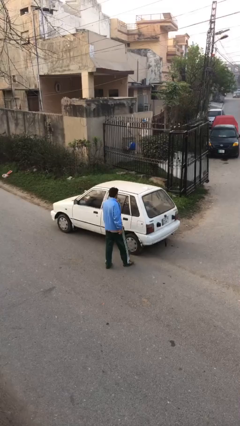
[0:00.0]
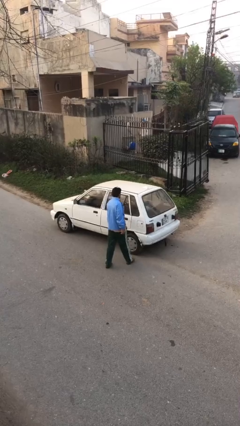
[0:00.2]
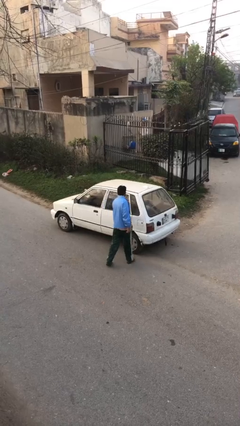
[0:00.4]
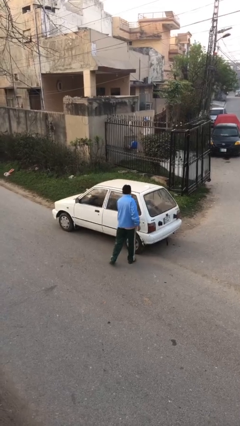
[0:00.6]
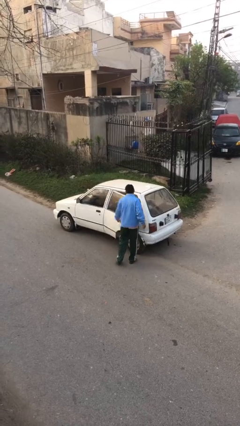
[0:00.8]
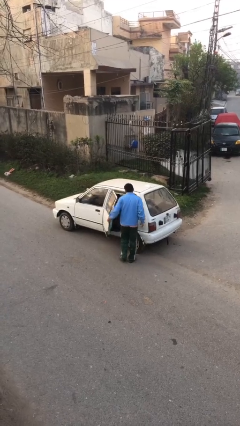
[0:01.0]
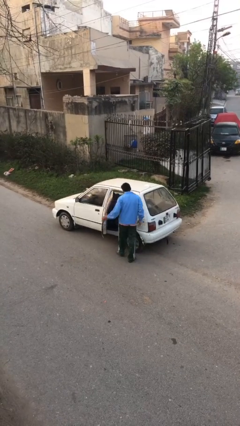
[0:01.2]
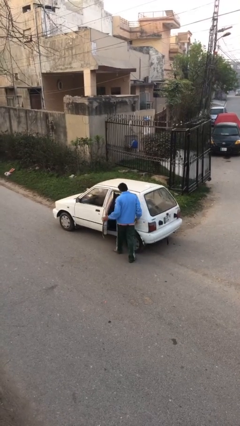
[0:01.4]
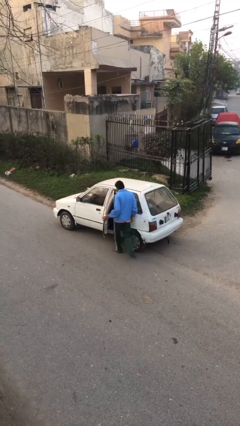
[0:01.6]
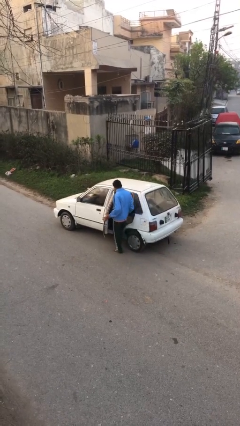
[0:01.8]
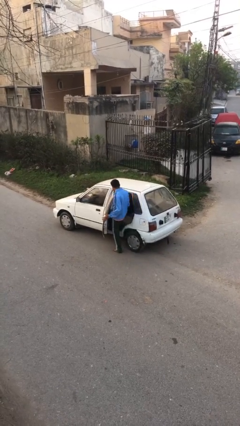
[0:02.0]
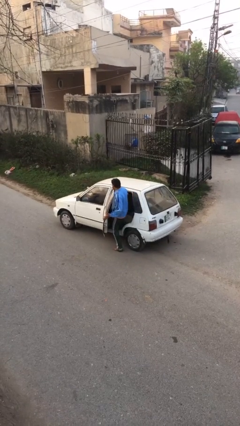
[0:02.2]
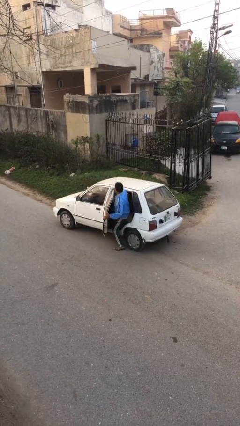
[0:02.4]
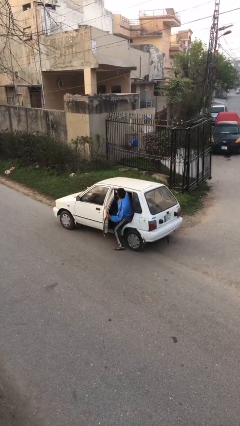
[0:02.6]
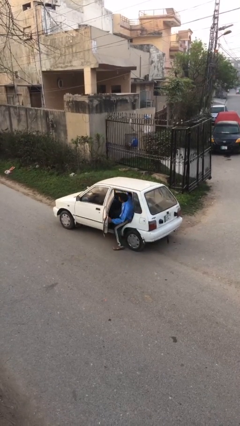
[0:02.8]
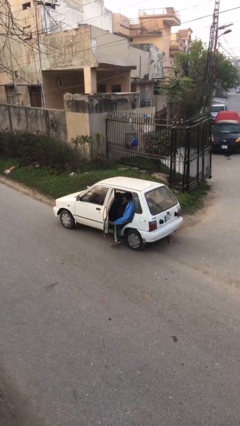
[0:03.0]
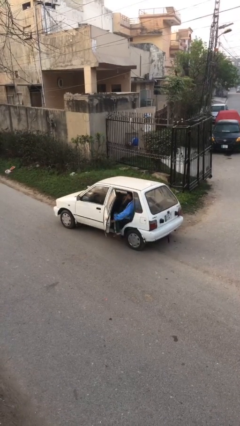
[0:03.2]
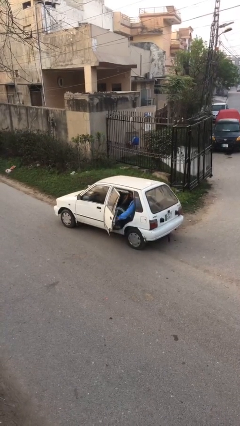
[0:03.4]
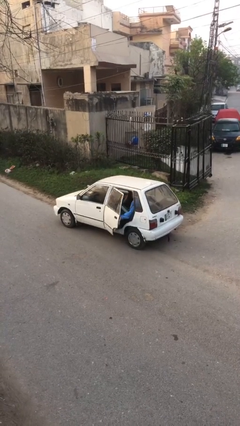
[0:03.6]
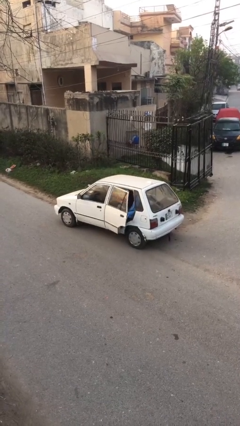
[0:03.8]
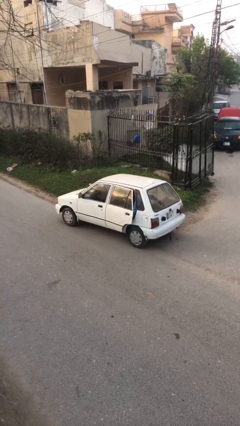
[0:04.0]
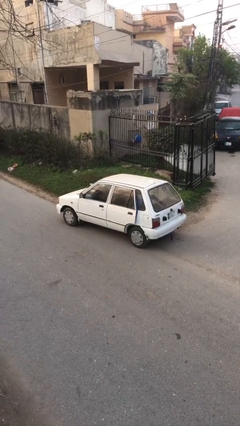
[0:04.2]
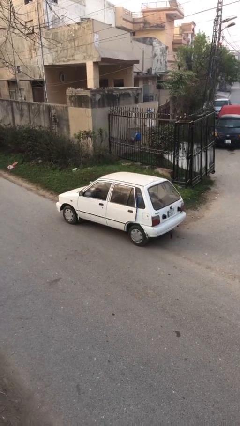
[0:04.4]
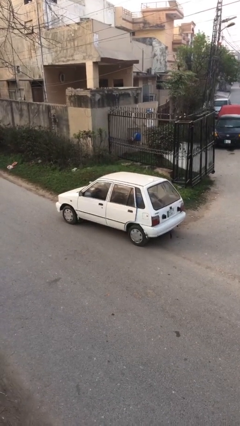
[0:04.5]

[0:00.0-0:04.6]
car picks up person

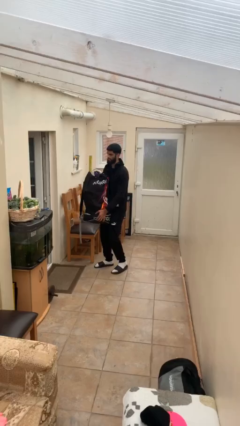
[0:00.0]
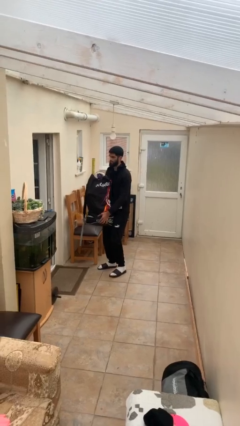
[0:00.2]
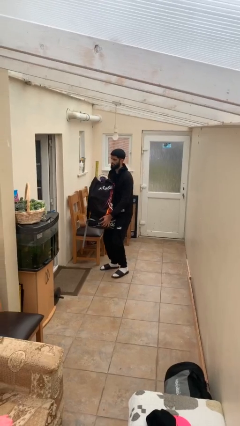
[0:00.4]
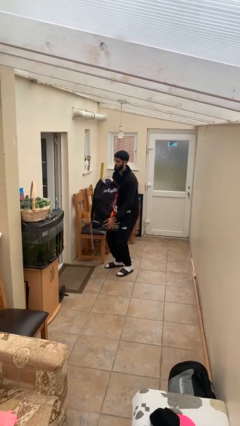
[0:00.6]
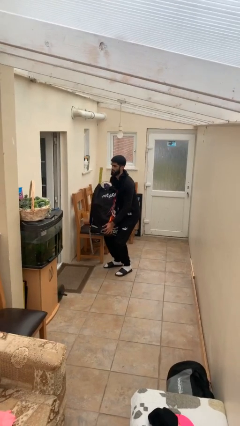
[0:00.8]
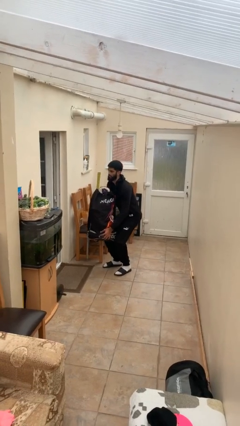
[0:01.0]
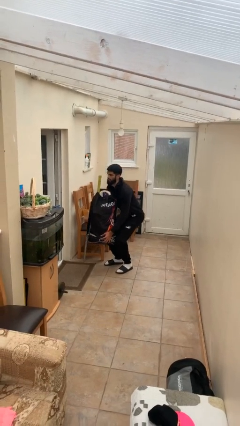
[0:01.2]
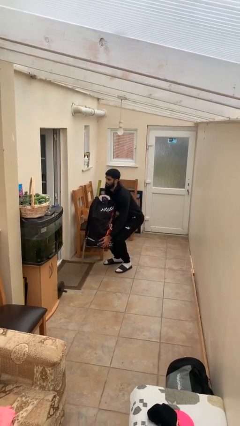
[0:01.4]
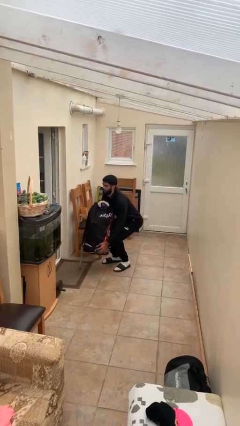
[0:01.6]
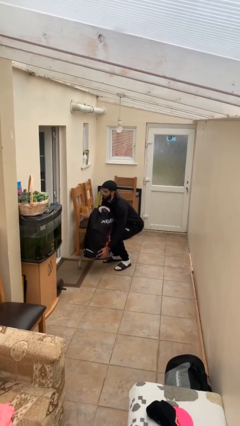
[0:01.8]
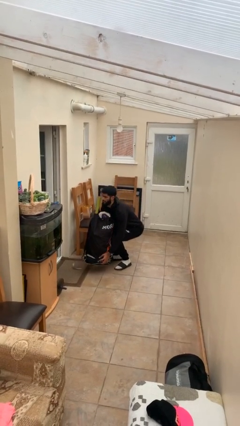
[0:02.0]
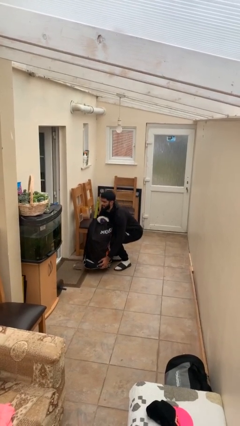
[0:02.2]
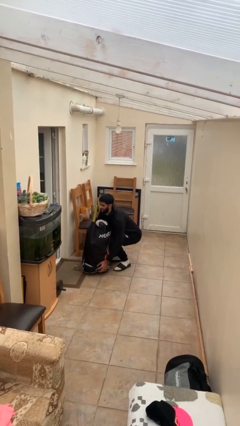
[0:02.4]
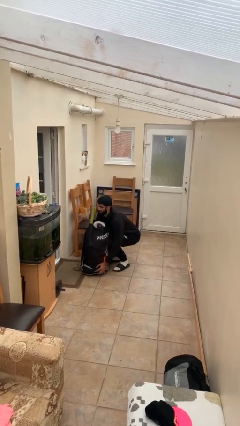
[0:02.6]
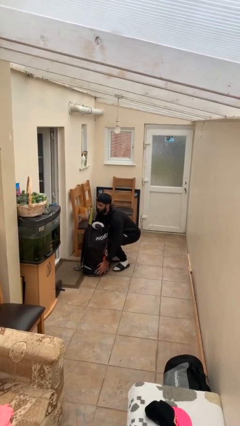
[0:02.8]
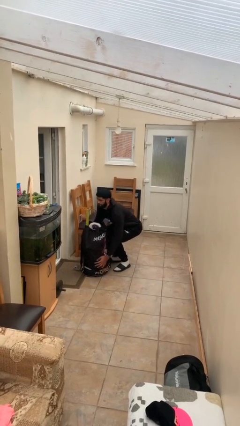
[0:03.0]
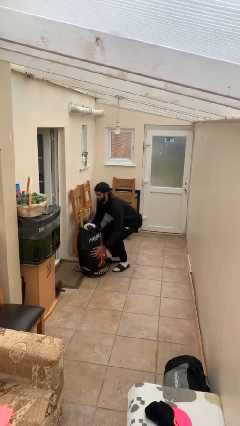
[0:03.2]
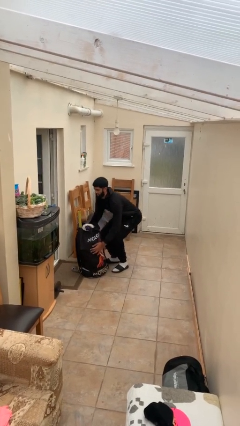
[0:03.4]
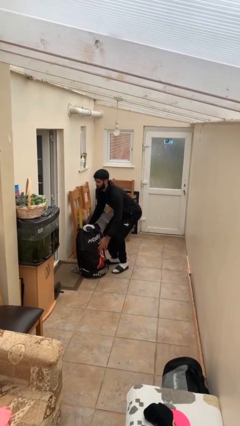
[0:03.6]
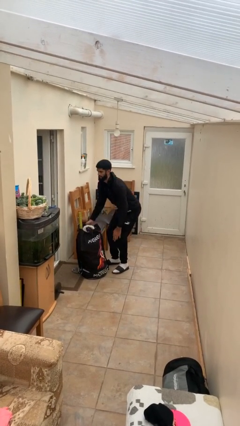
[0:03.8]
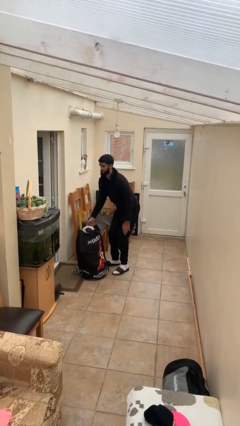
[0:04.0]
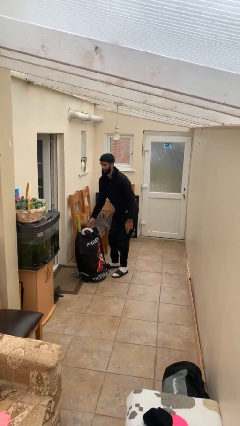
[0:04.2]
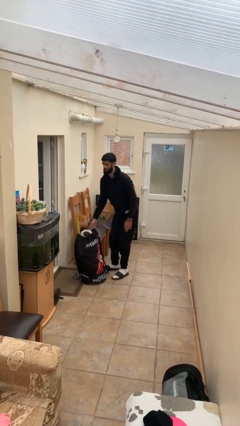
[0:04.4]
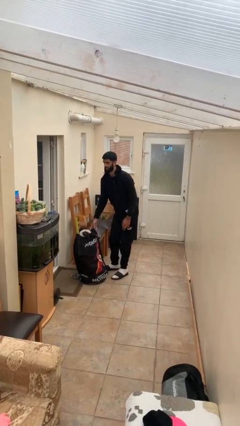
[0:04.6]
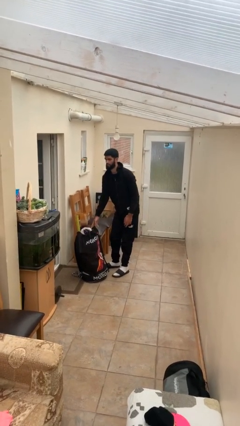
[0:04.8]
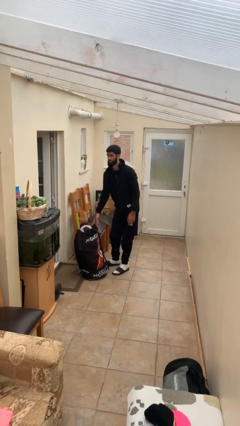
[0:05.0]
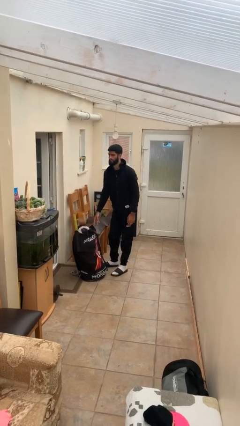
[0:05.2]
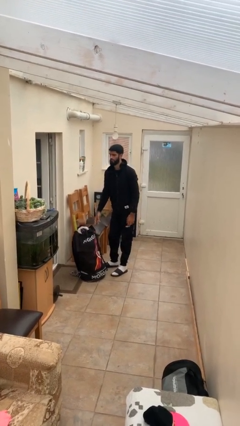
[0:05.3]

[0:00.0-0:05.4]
person puts down object on floor

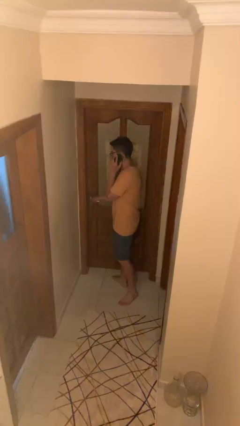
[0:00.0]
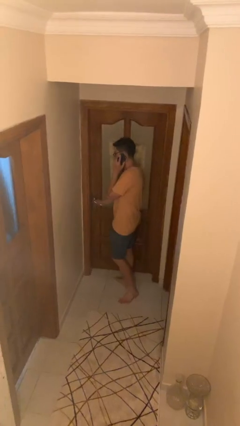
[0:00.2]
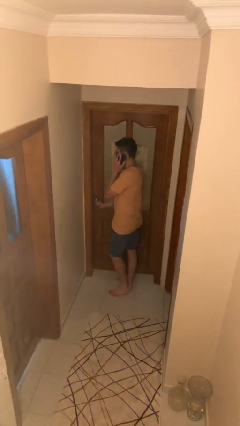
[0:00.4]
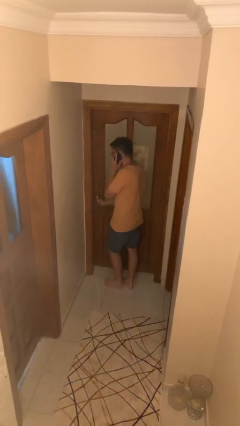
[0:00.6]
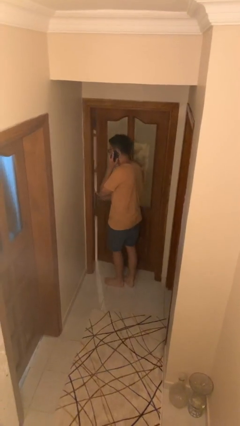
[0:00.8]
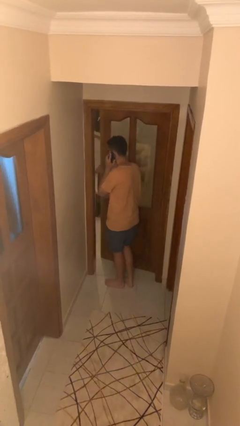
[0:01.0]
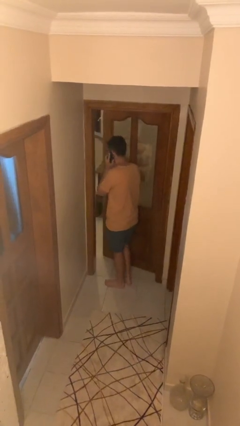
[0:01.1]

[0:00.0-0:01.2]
person opens facility door

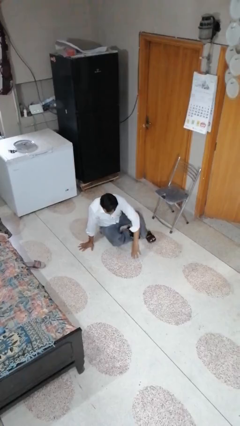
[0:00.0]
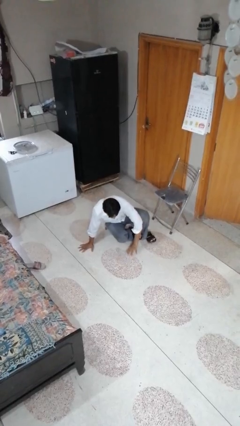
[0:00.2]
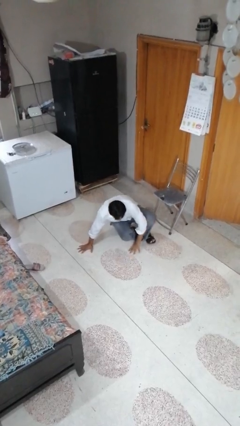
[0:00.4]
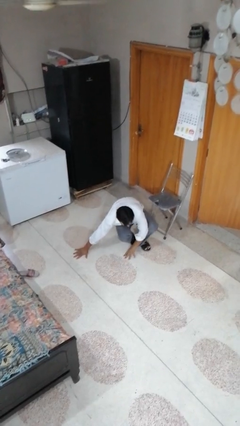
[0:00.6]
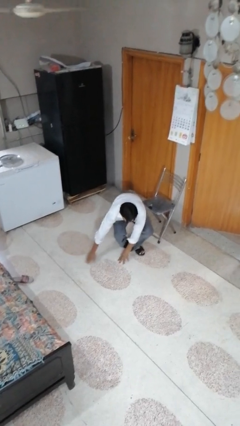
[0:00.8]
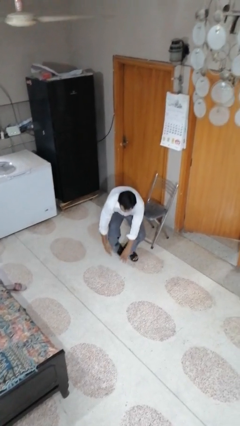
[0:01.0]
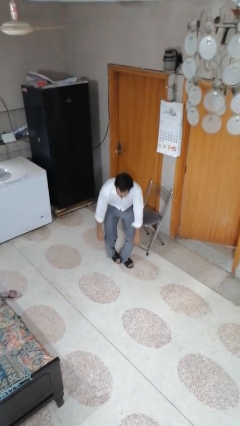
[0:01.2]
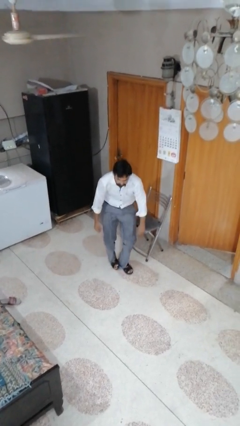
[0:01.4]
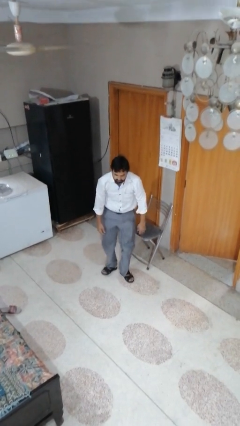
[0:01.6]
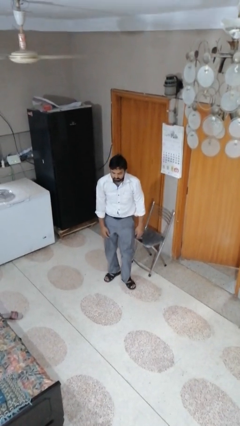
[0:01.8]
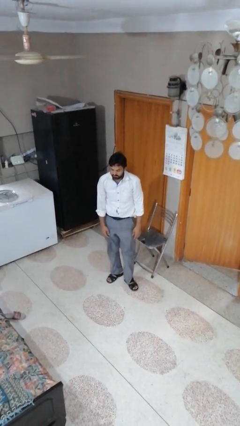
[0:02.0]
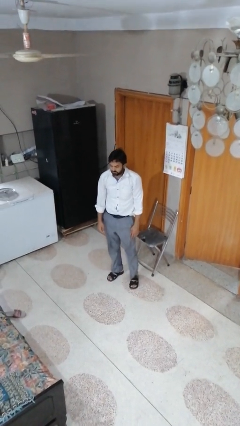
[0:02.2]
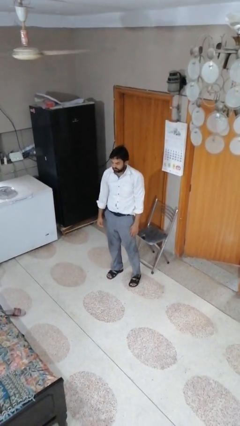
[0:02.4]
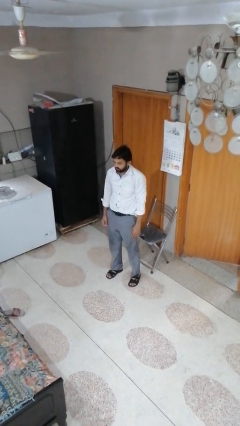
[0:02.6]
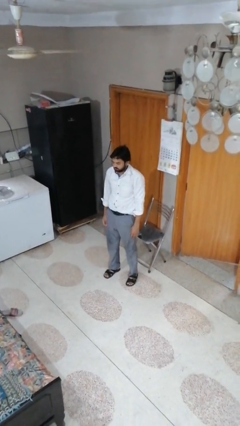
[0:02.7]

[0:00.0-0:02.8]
person stands up from floor

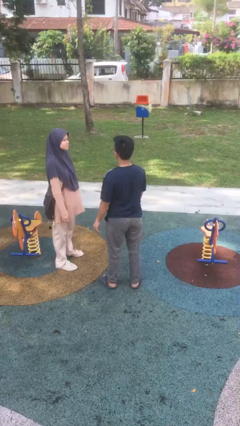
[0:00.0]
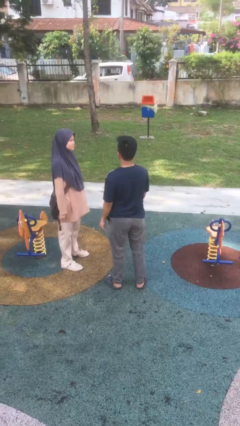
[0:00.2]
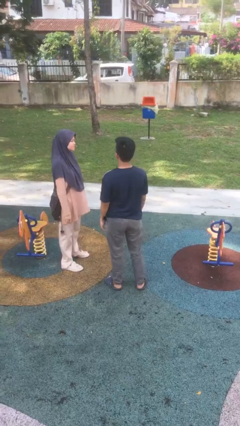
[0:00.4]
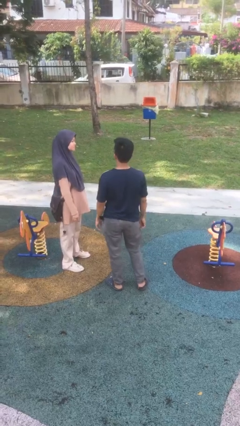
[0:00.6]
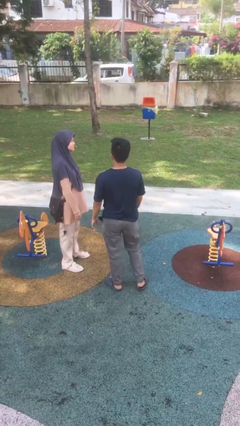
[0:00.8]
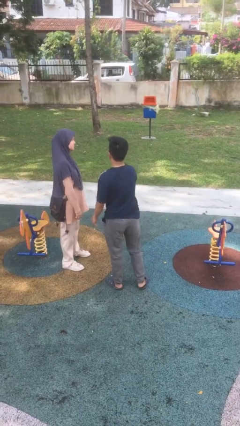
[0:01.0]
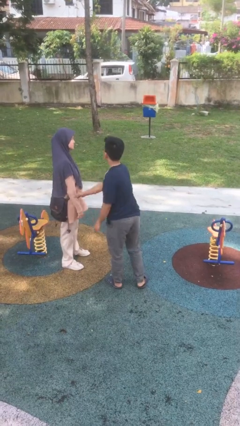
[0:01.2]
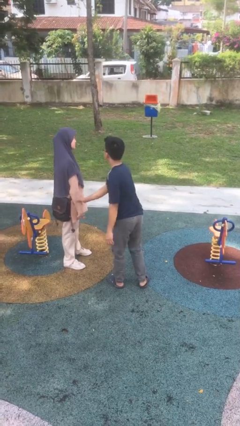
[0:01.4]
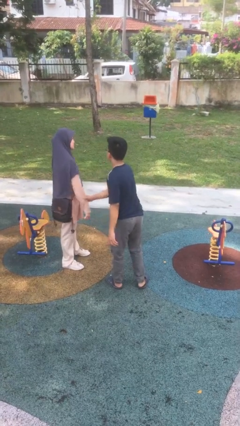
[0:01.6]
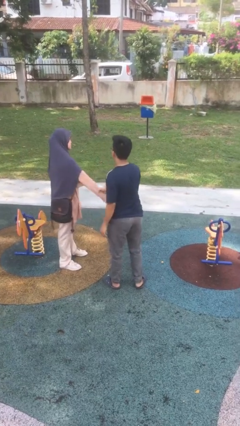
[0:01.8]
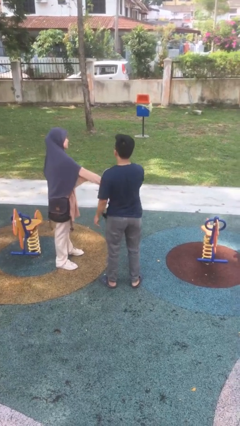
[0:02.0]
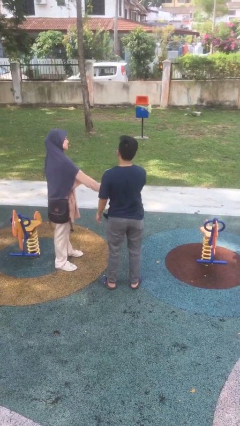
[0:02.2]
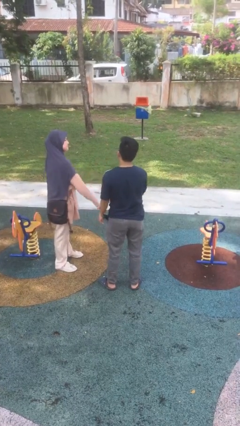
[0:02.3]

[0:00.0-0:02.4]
person grabs person by forearm

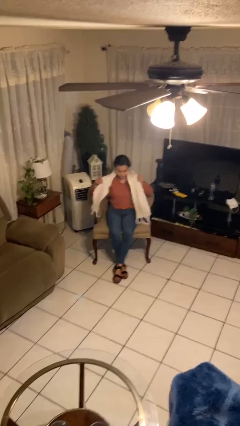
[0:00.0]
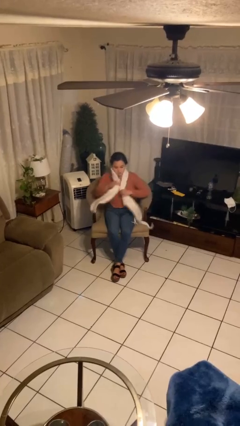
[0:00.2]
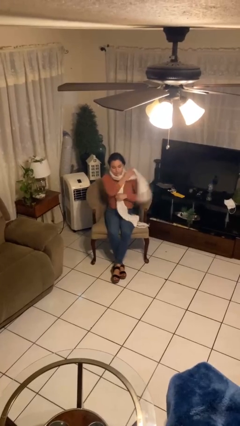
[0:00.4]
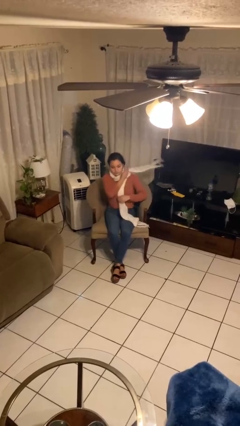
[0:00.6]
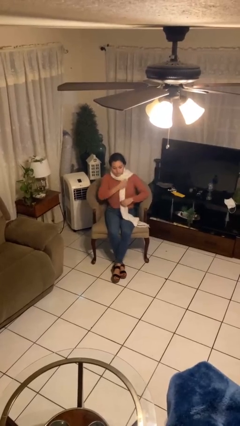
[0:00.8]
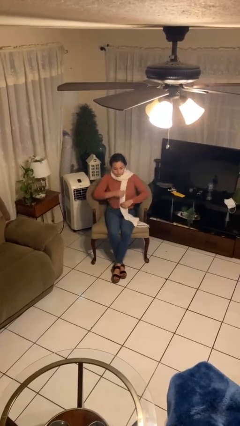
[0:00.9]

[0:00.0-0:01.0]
person puts on scarf

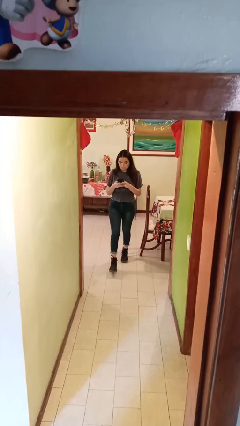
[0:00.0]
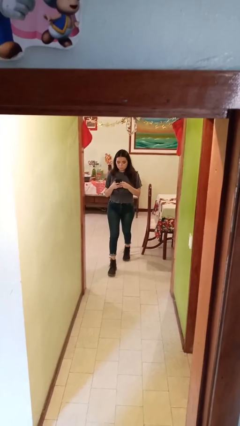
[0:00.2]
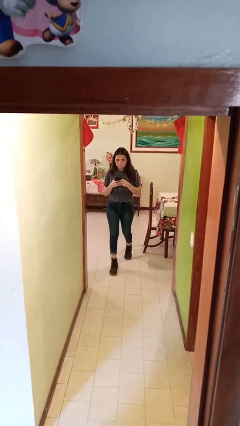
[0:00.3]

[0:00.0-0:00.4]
person enters scene through structure
